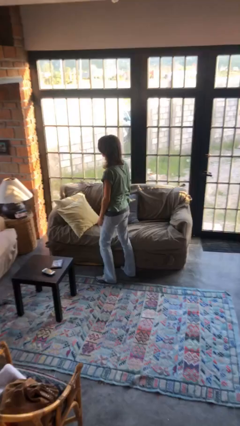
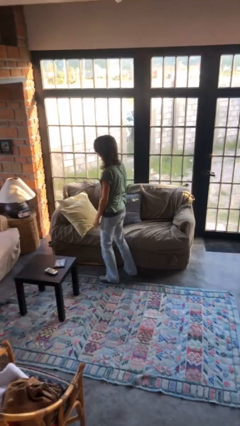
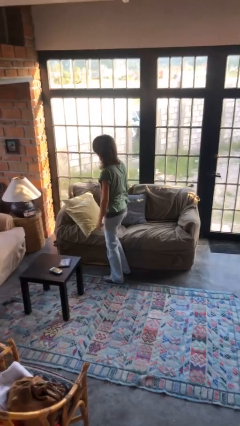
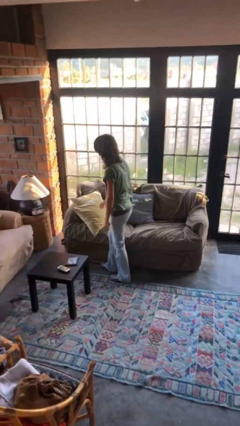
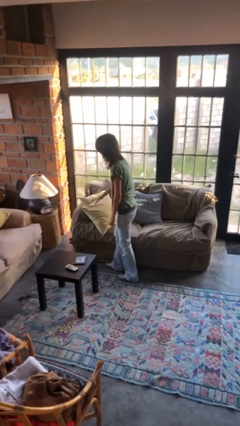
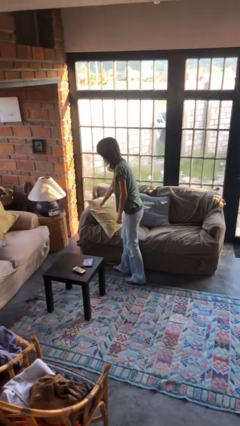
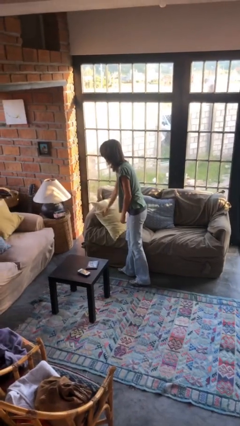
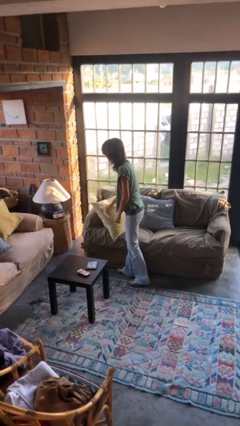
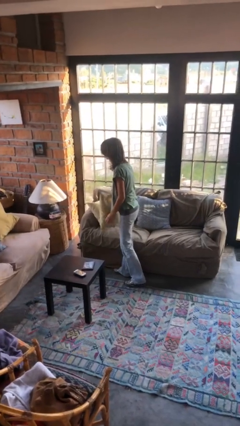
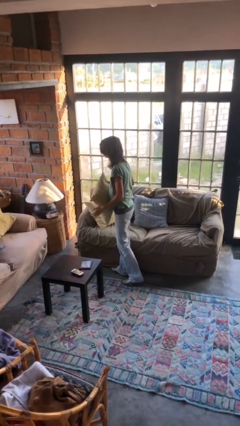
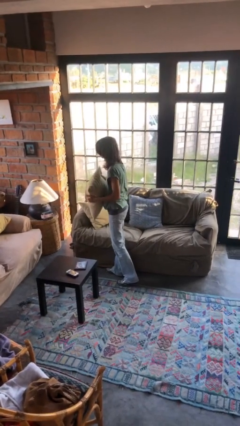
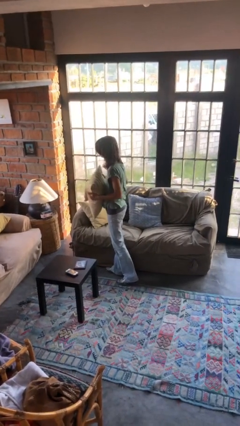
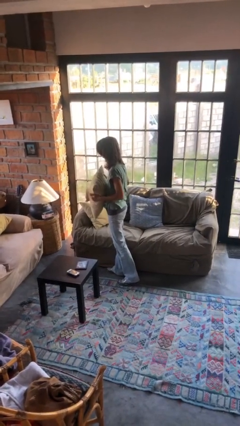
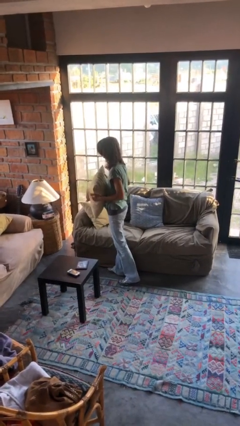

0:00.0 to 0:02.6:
person picks up object from couch

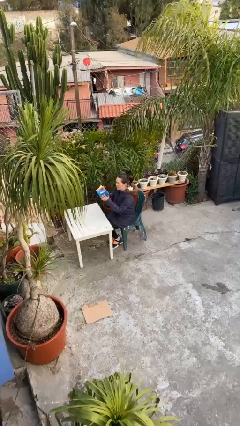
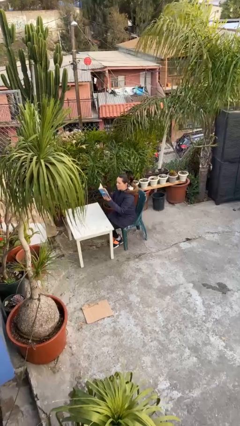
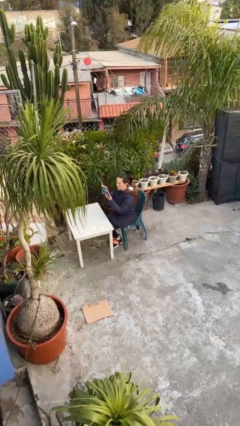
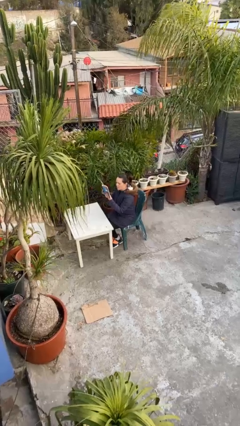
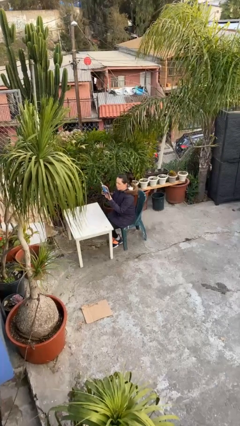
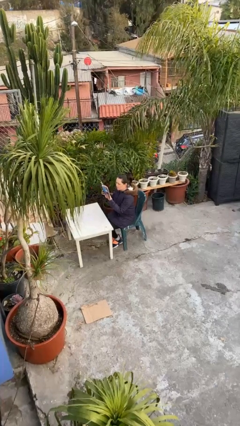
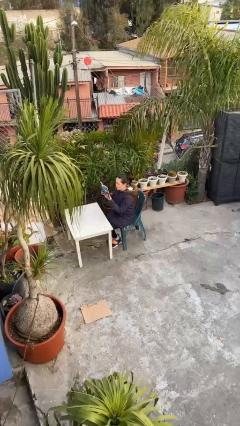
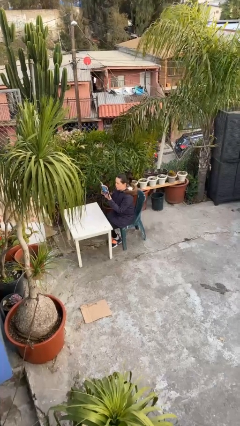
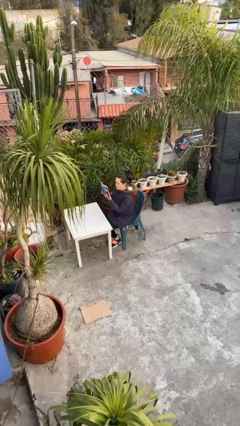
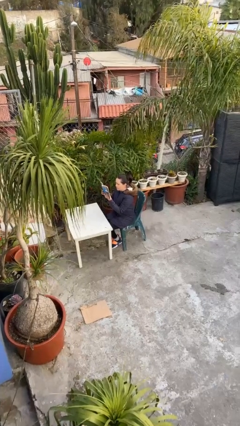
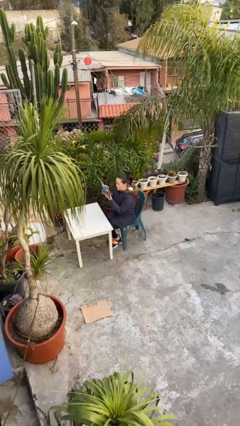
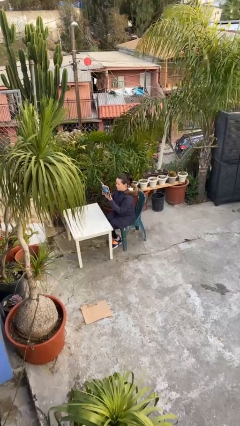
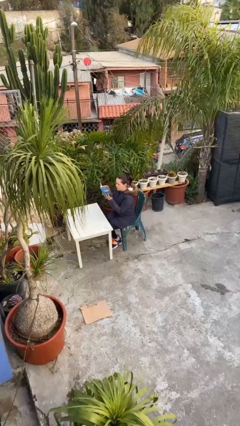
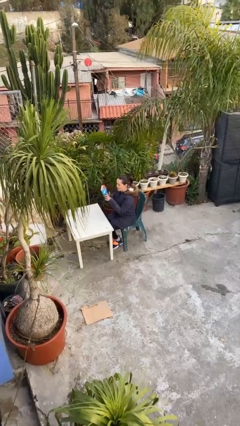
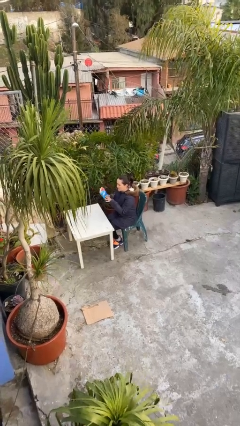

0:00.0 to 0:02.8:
person reads document

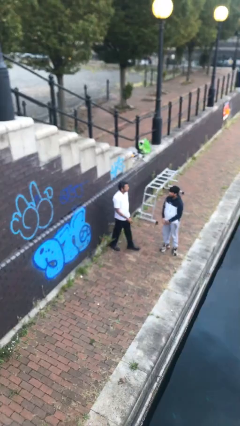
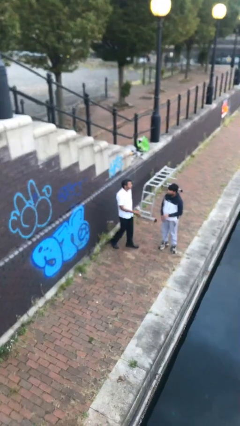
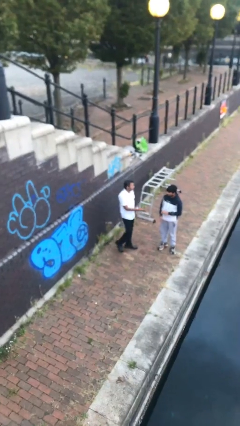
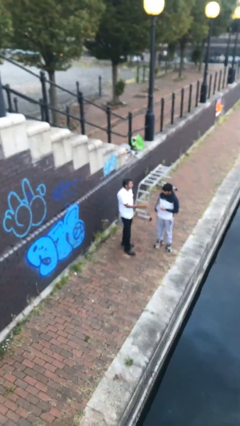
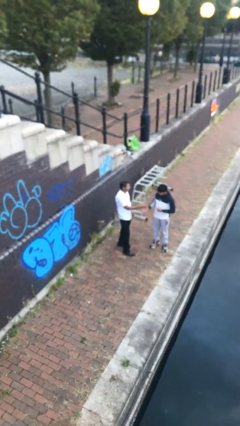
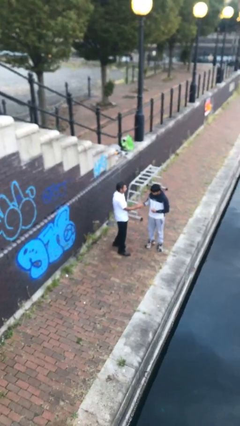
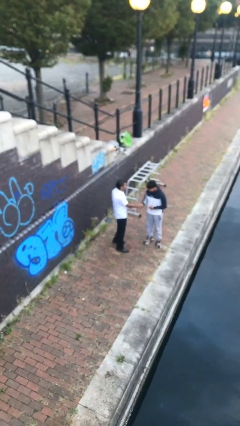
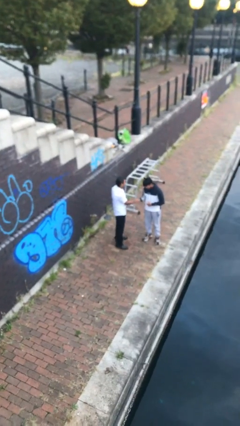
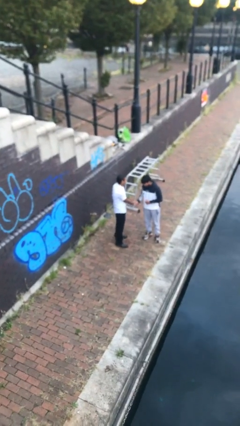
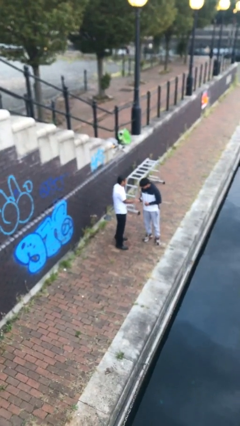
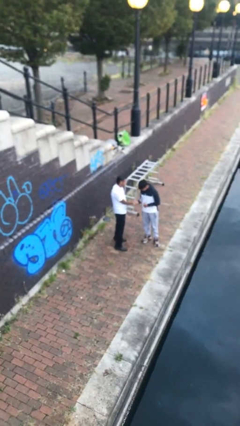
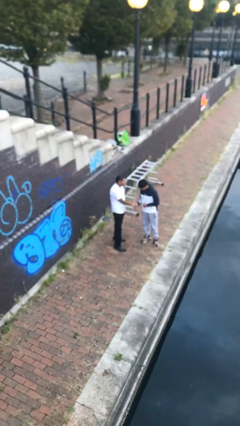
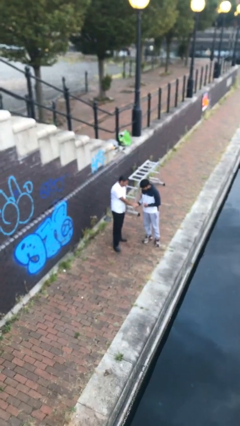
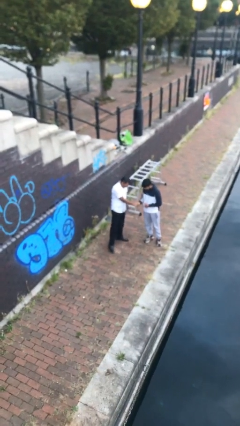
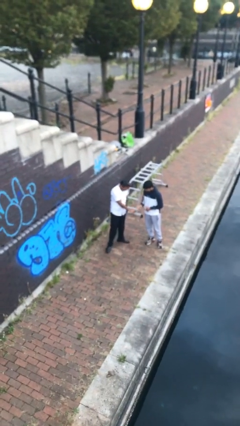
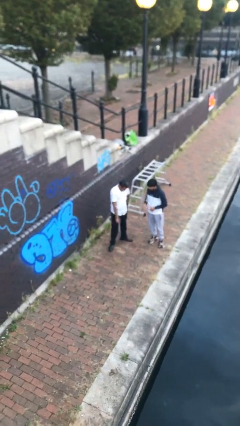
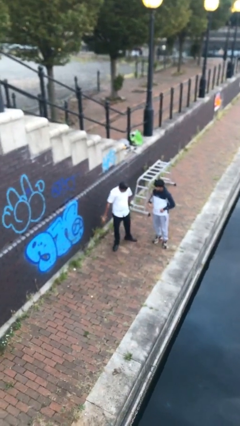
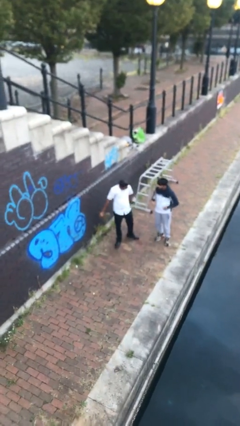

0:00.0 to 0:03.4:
person shakes hand

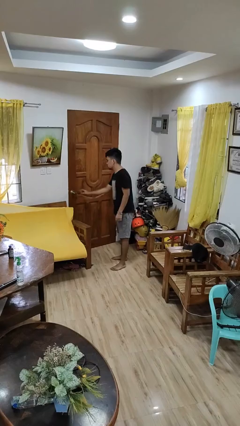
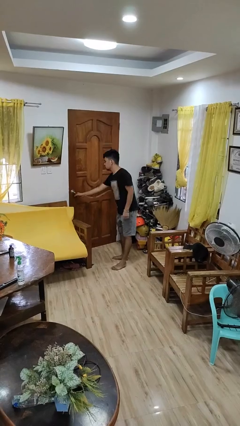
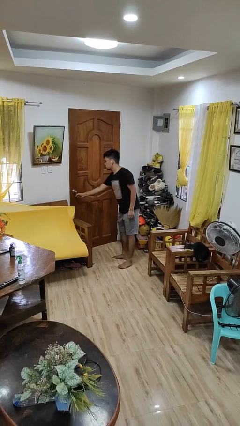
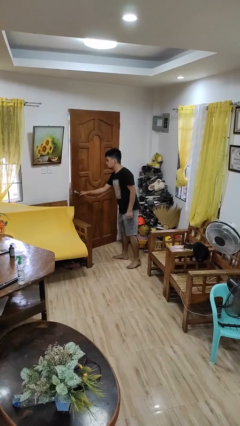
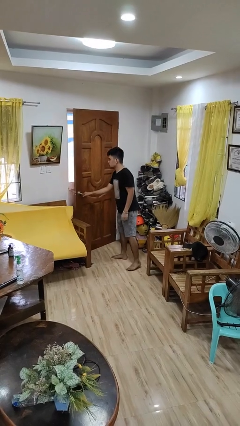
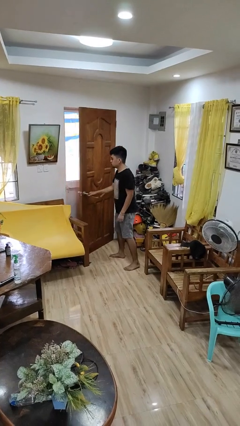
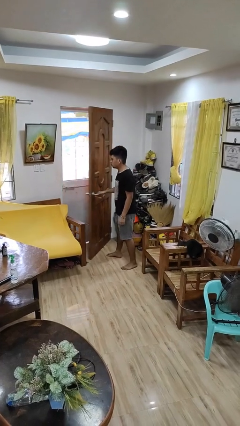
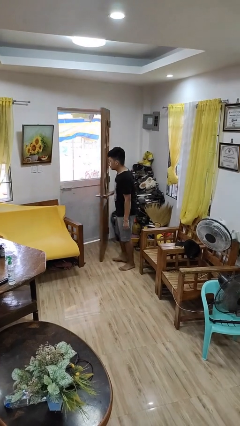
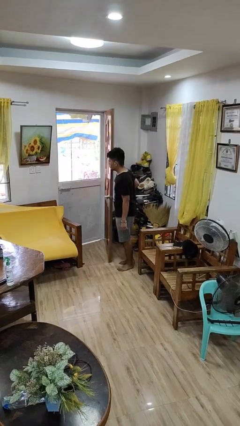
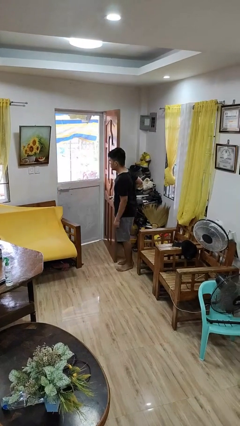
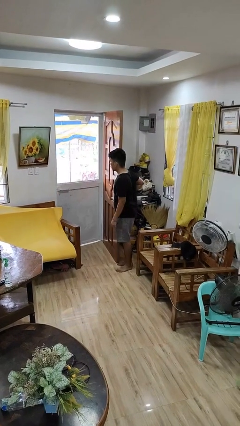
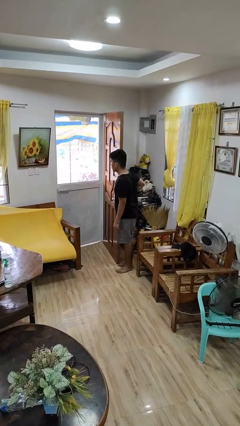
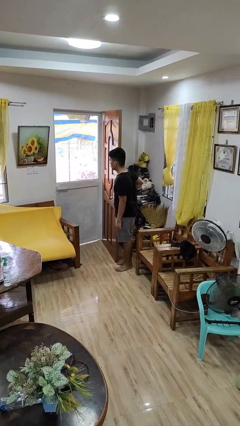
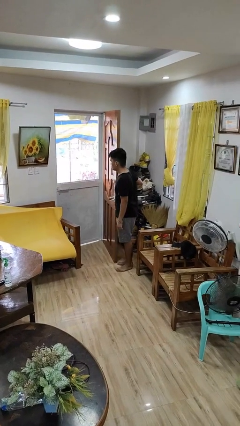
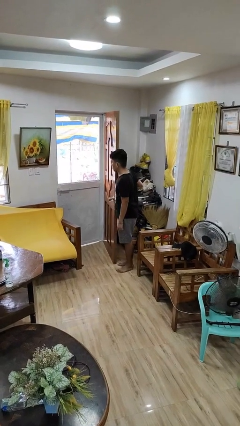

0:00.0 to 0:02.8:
person opens facility door

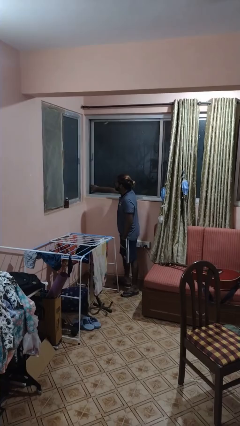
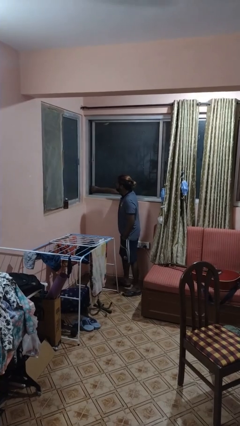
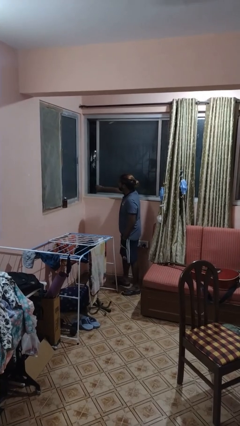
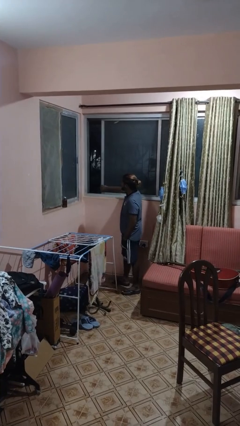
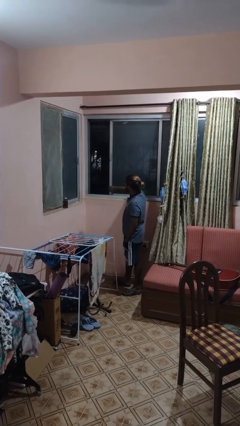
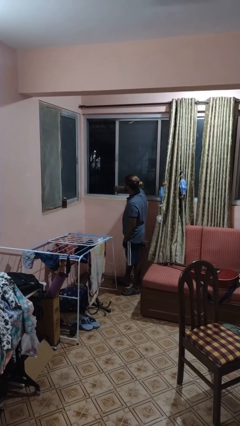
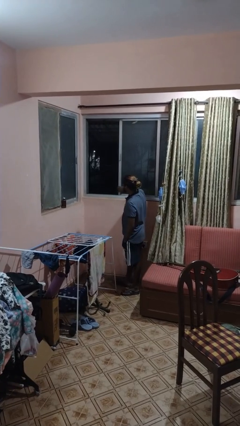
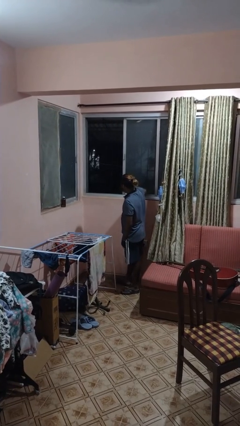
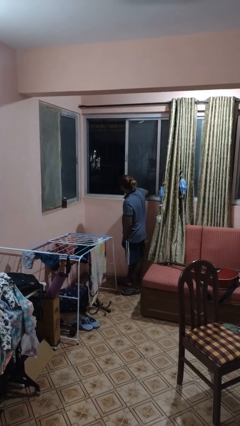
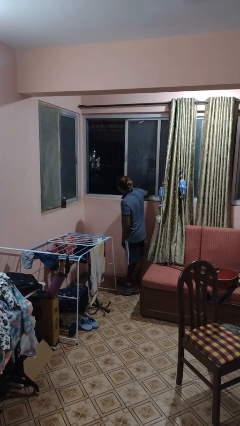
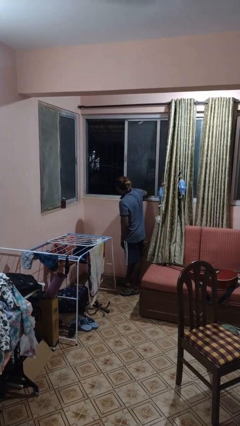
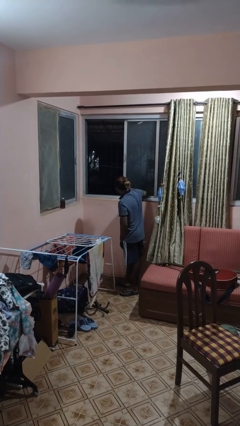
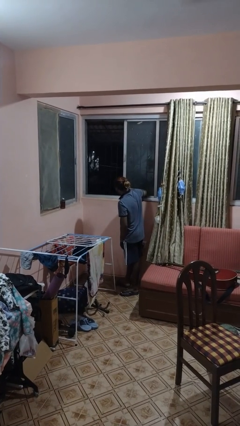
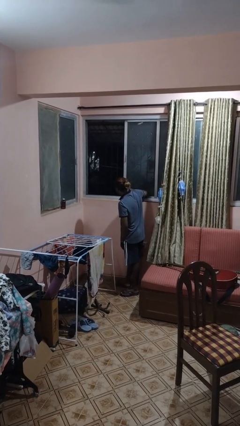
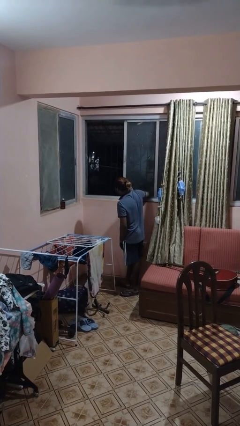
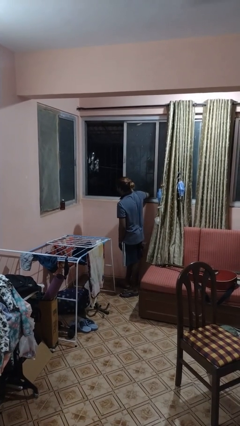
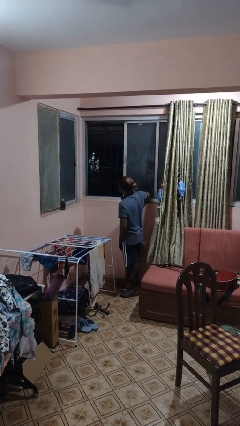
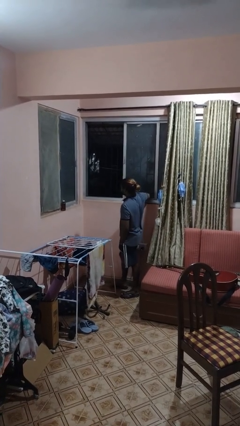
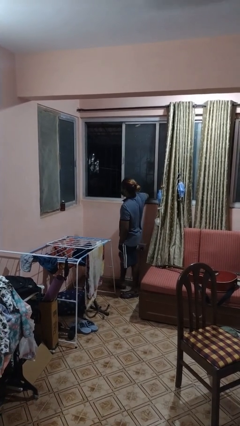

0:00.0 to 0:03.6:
person opens sliding door

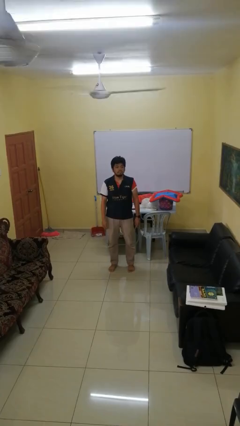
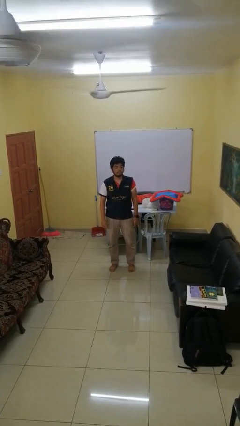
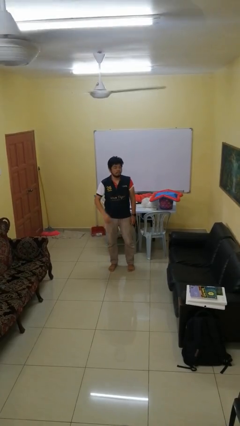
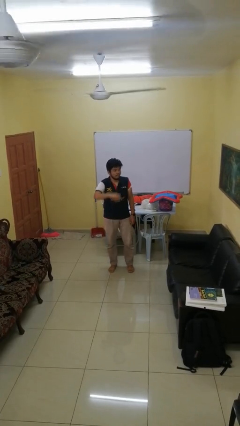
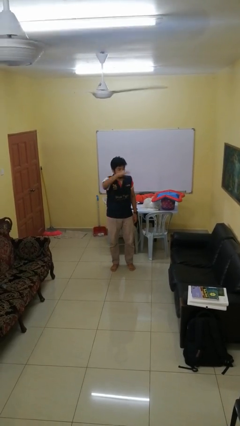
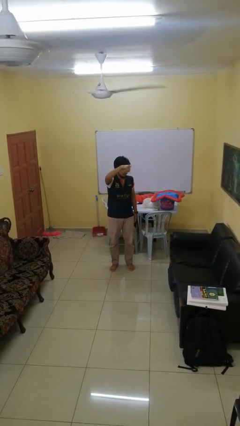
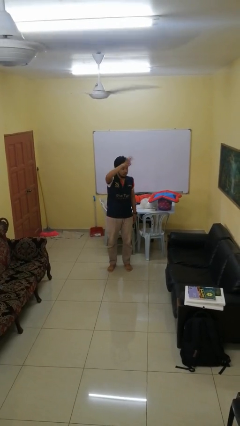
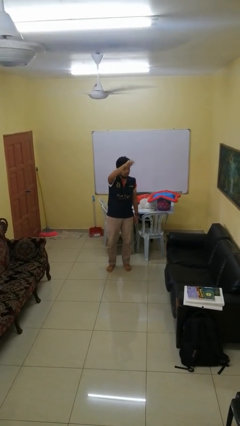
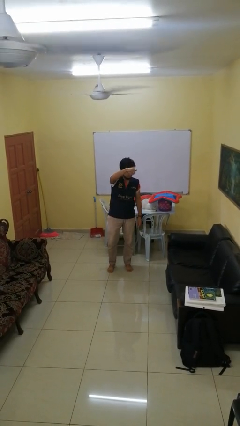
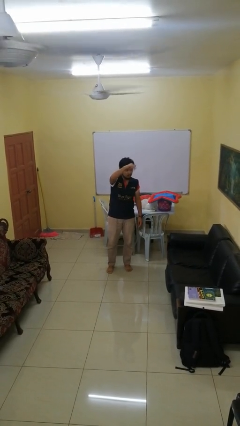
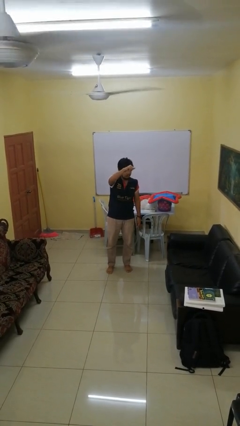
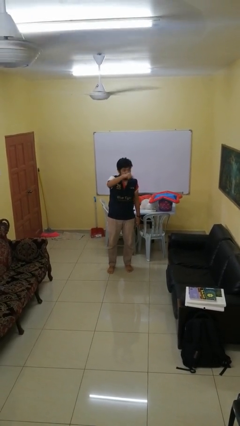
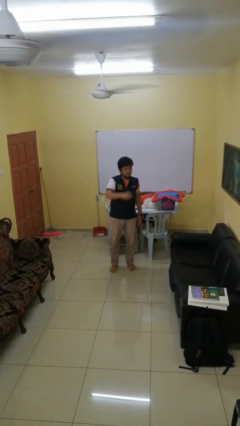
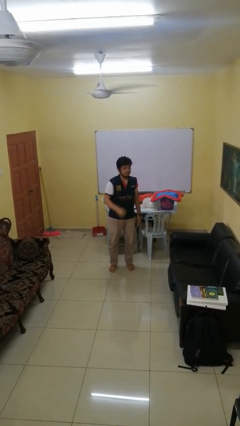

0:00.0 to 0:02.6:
person gestures come here
